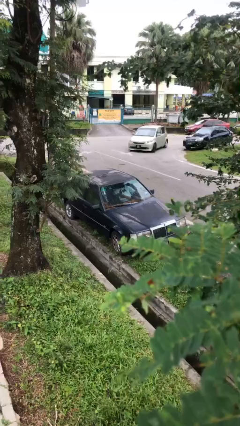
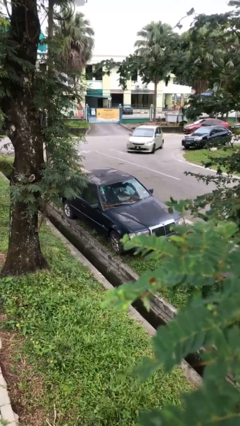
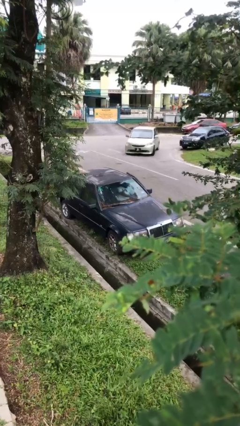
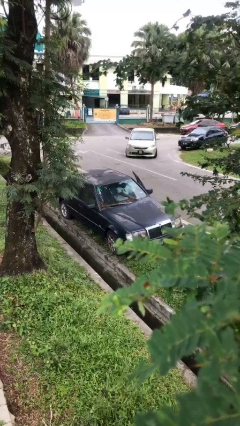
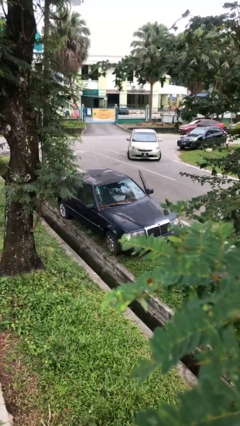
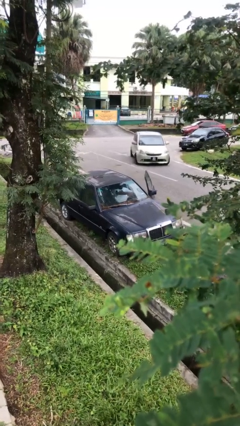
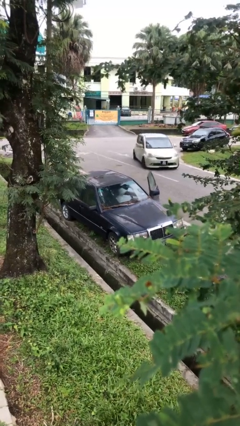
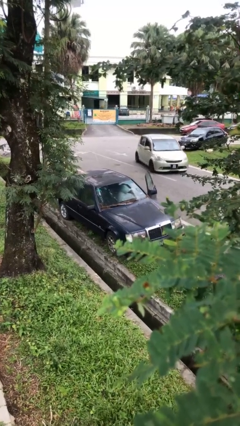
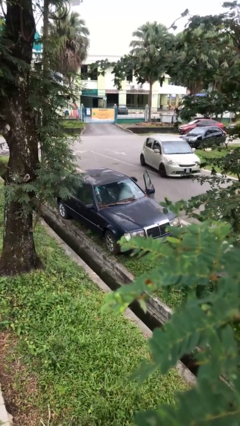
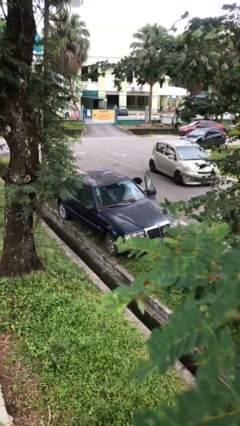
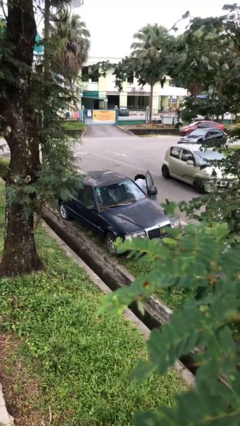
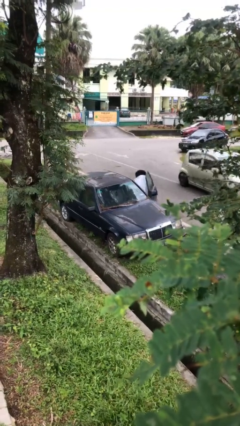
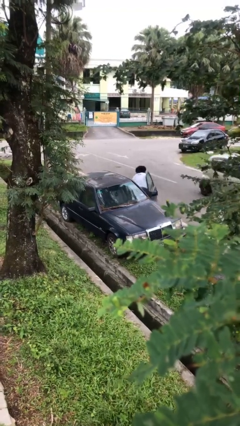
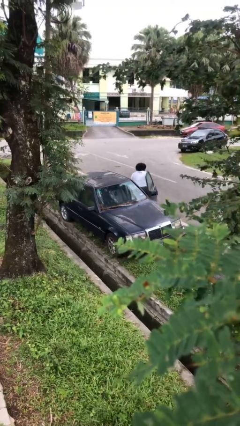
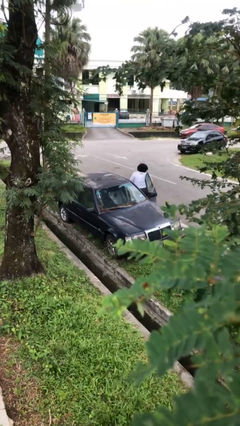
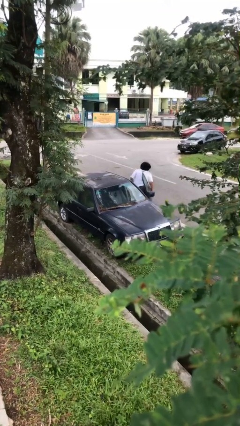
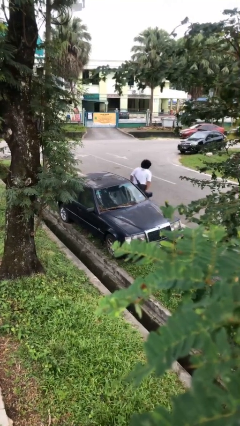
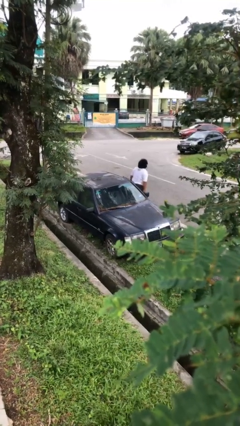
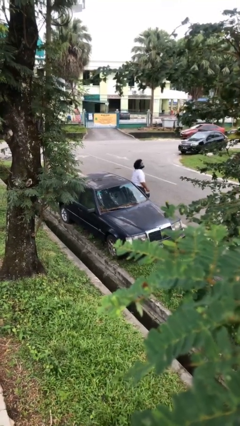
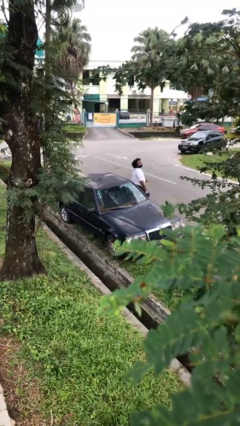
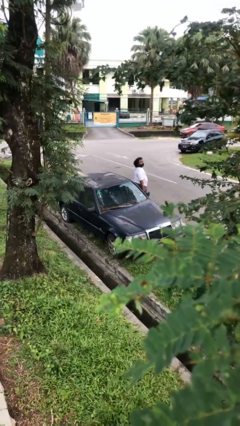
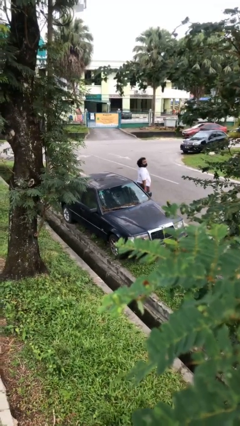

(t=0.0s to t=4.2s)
car drops off person

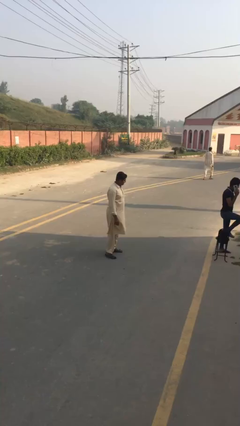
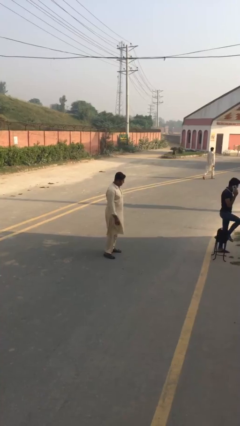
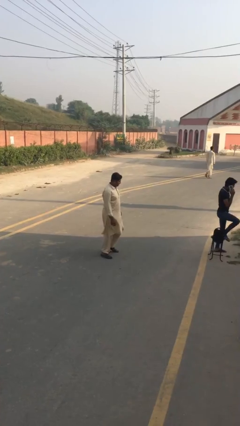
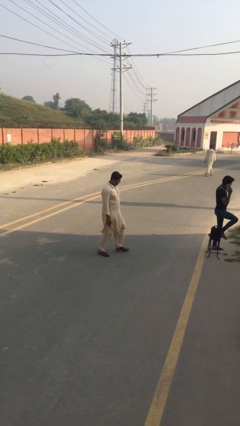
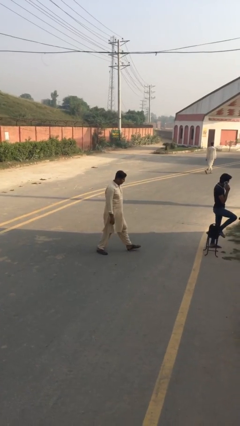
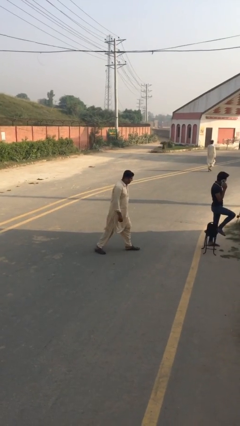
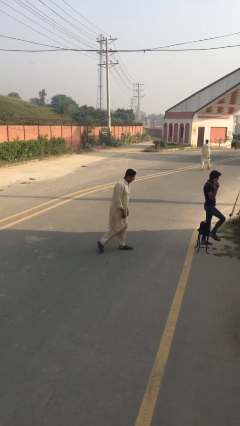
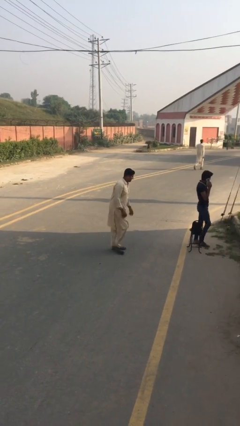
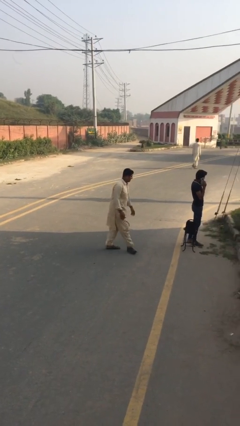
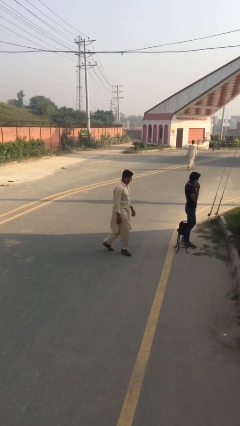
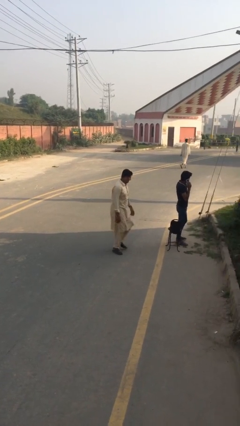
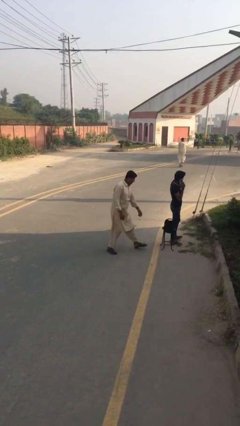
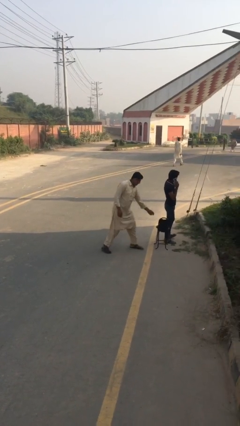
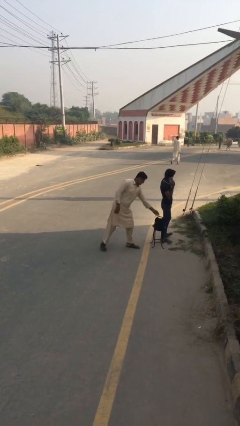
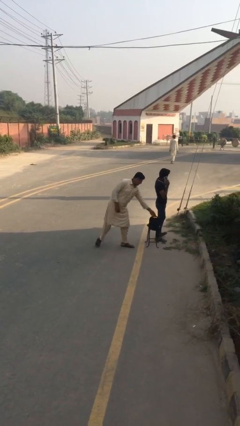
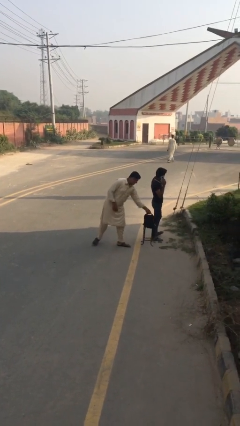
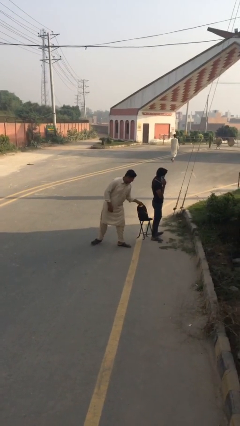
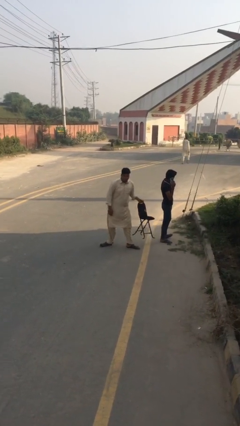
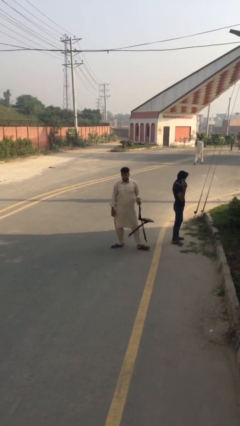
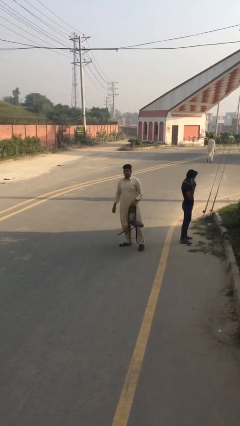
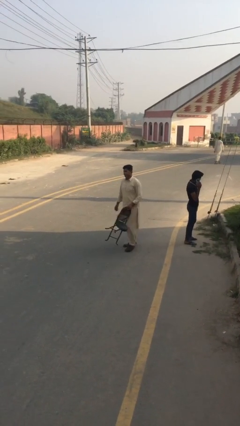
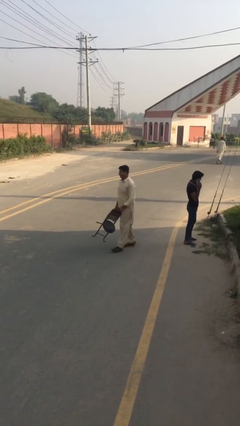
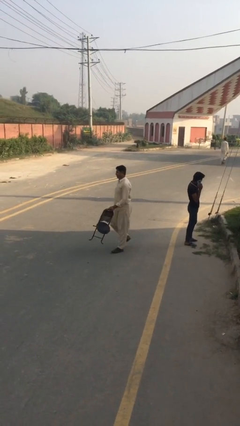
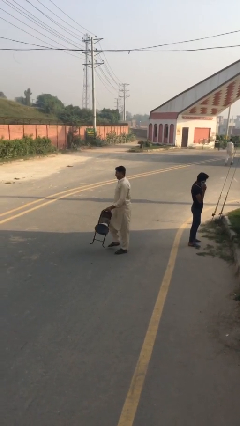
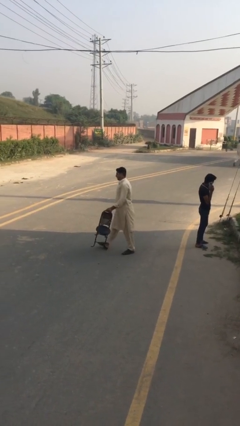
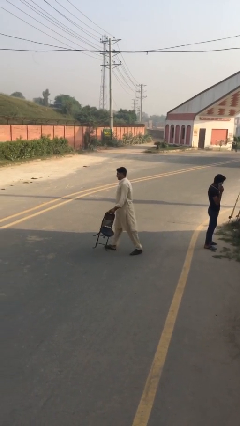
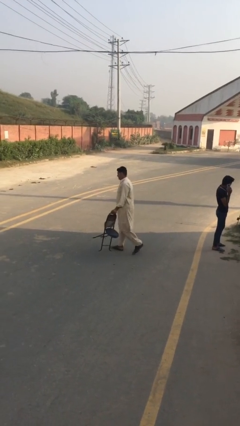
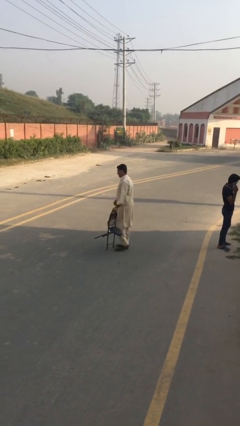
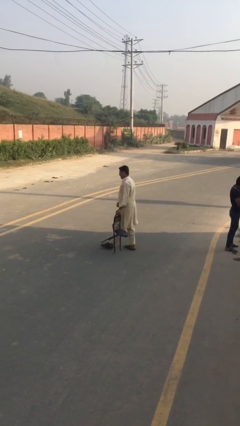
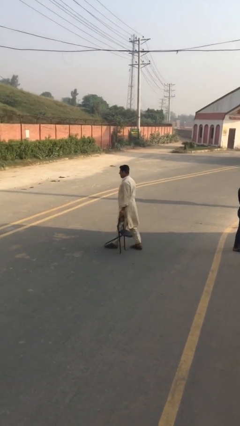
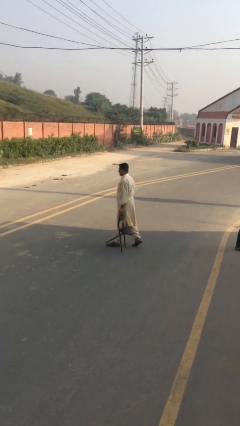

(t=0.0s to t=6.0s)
person steals object from person

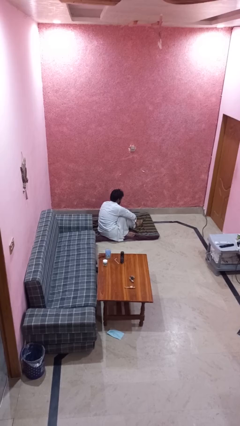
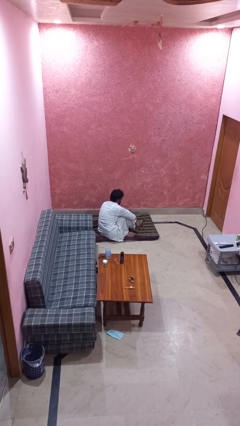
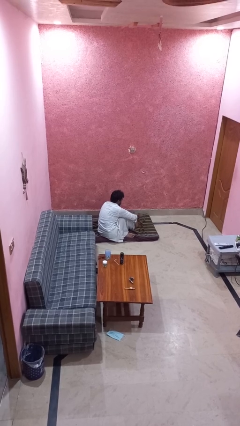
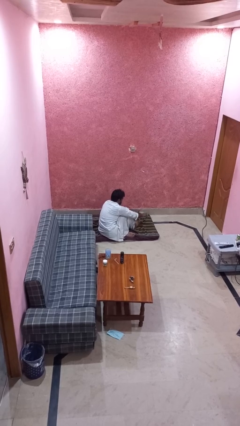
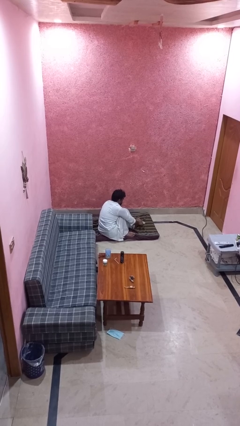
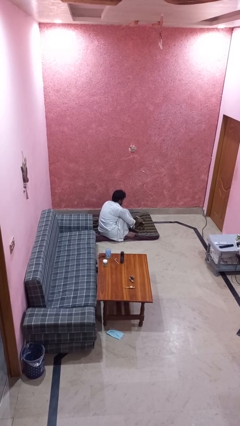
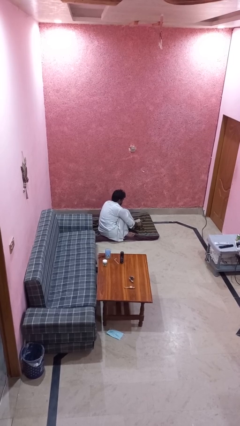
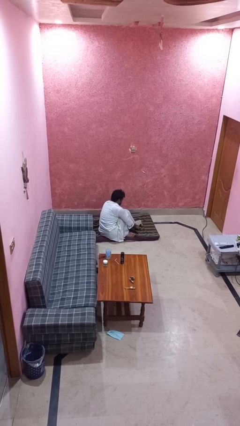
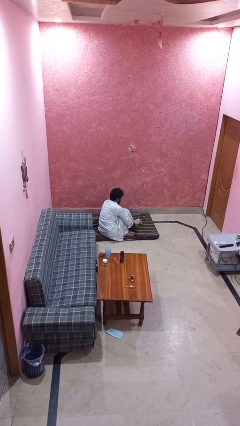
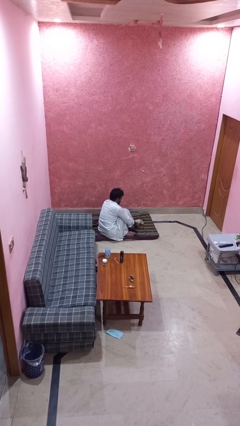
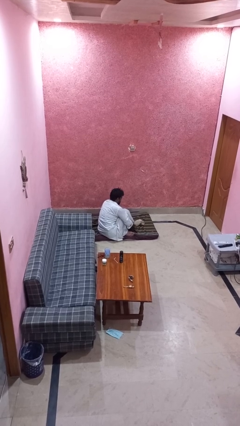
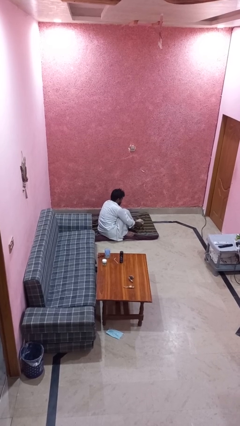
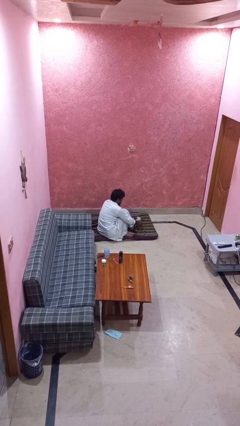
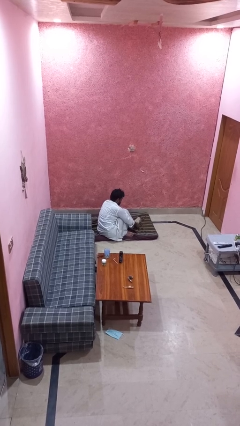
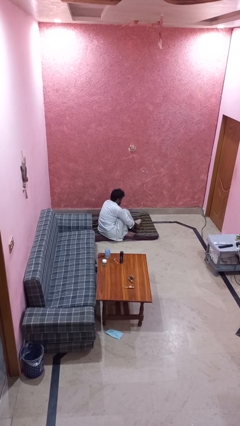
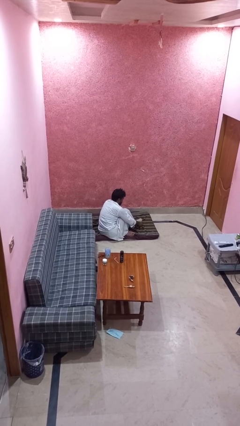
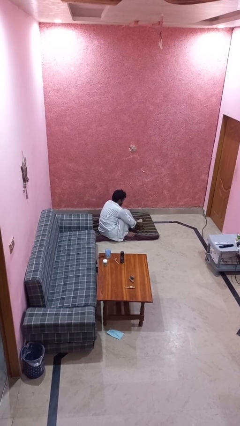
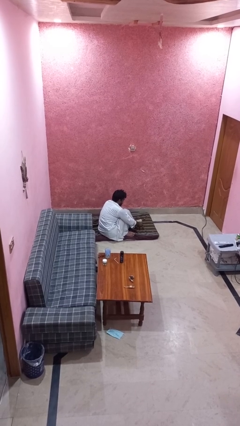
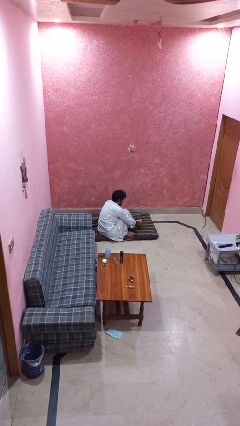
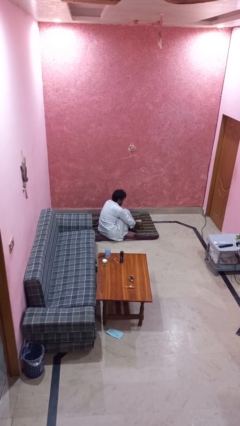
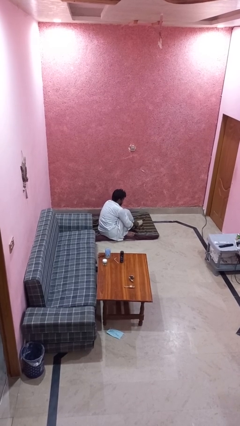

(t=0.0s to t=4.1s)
person puts on socks

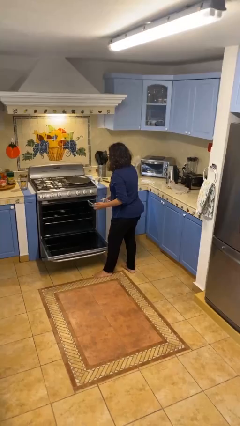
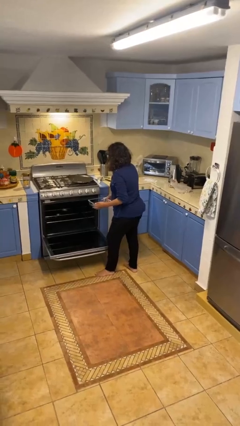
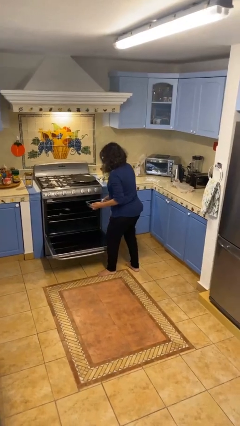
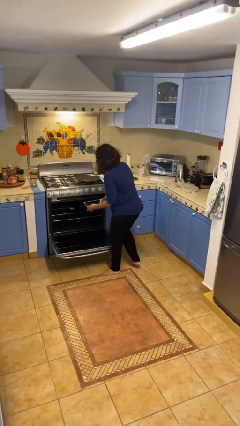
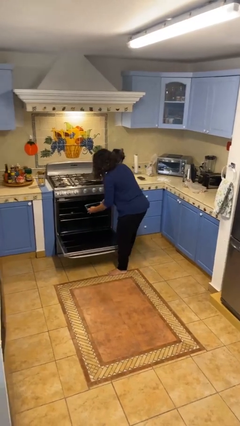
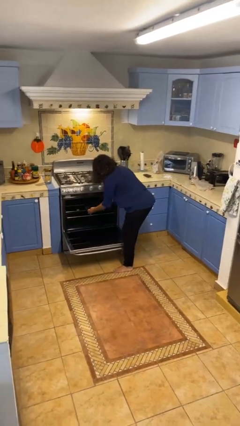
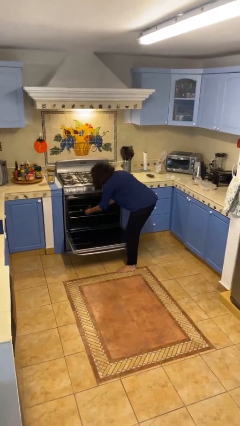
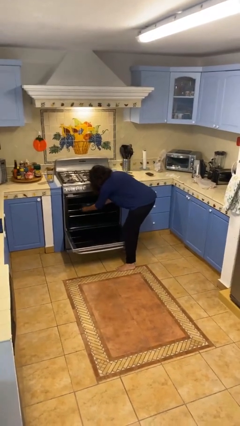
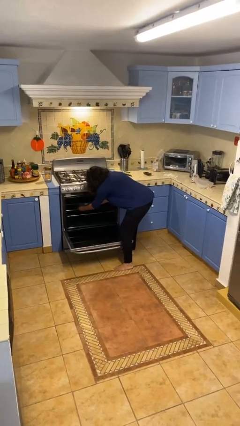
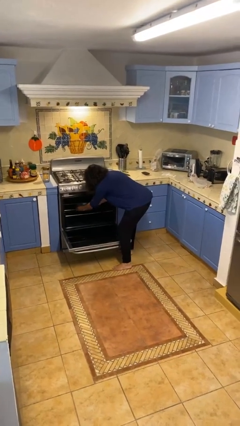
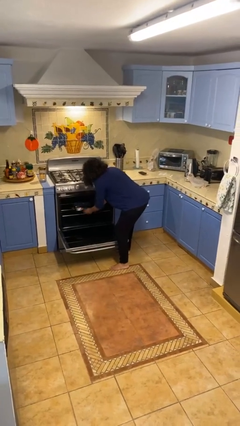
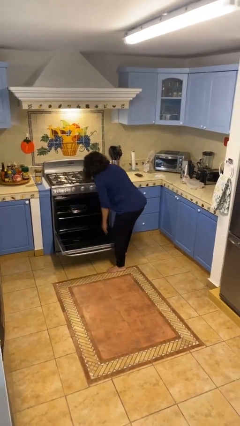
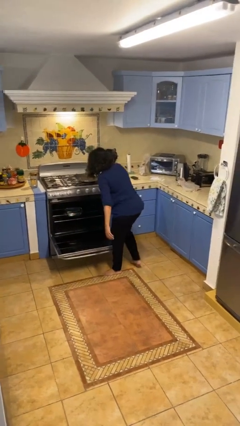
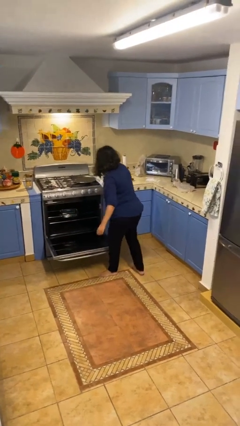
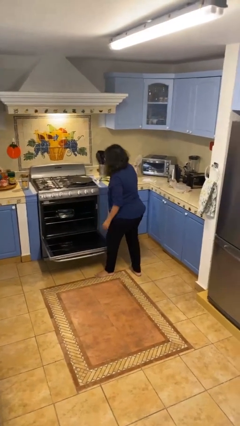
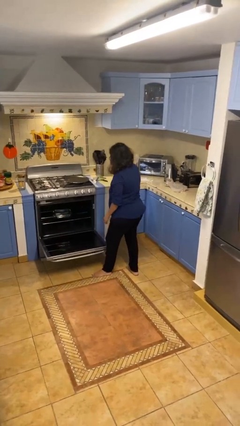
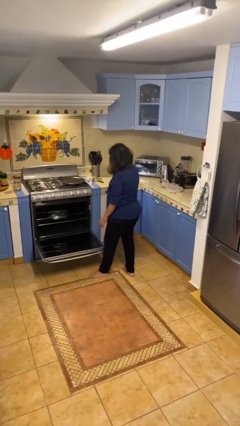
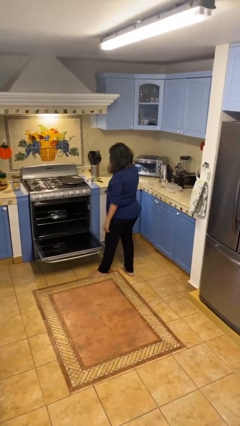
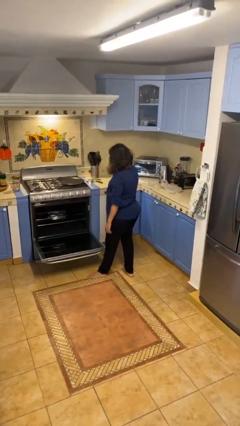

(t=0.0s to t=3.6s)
person puts object into oven

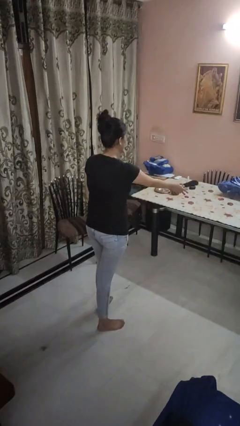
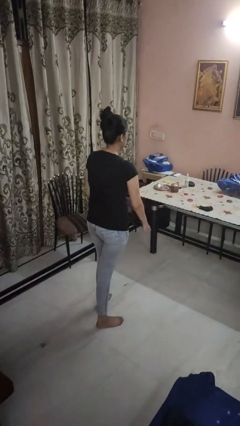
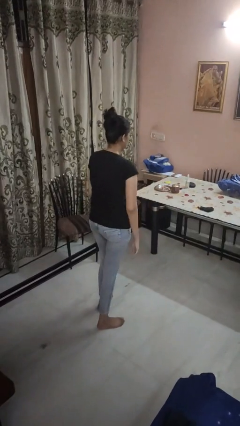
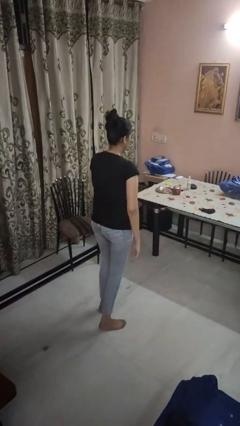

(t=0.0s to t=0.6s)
person throws object on table
